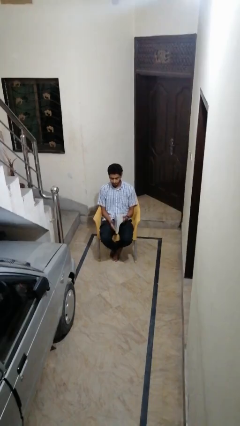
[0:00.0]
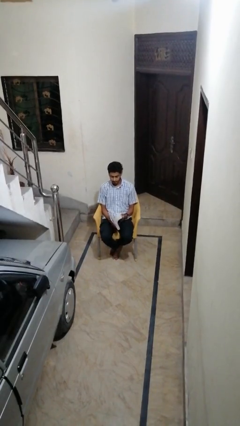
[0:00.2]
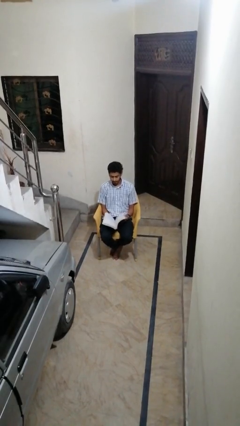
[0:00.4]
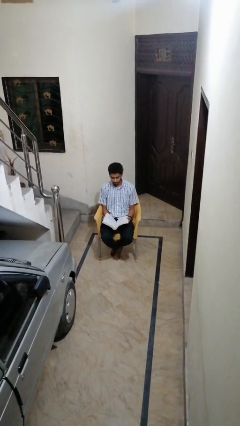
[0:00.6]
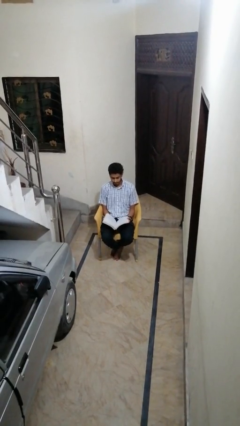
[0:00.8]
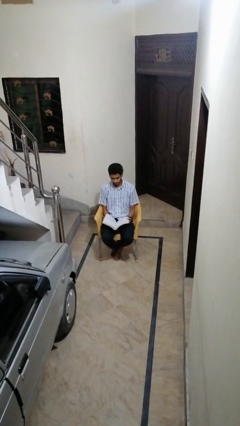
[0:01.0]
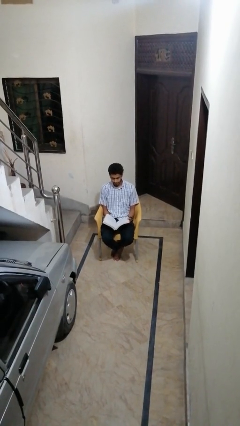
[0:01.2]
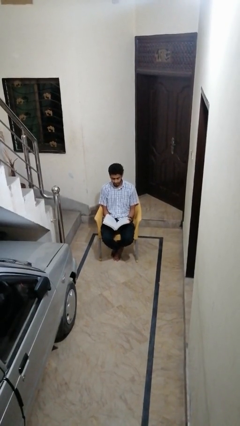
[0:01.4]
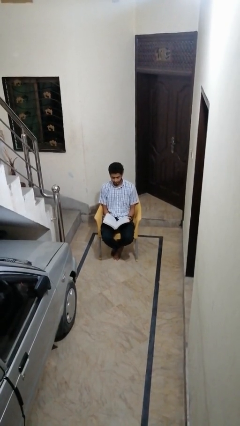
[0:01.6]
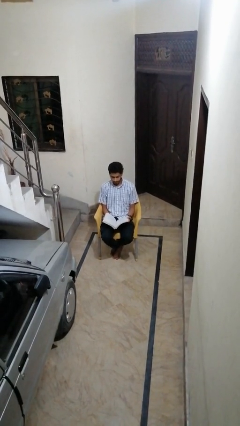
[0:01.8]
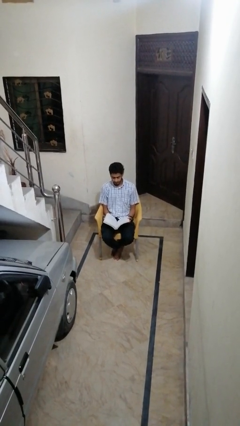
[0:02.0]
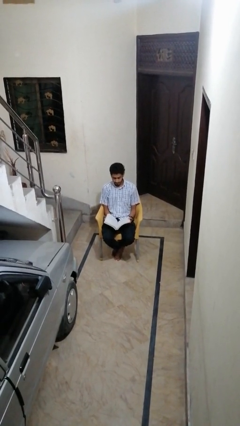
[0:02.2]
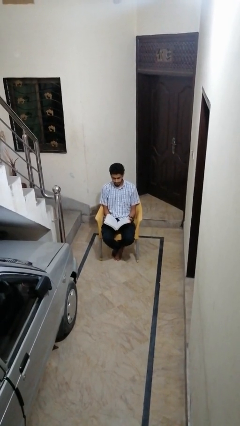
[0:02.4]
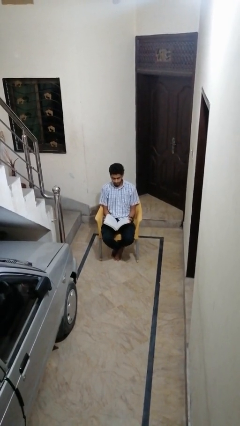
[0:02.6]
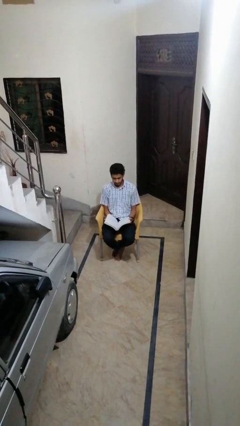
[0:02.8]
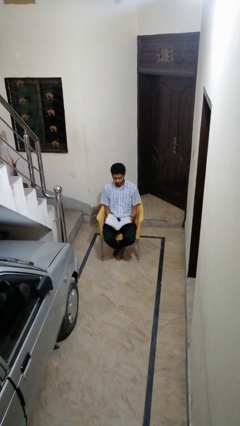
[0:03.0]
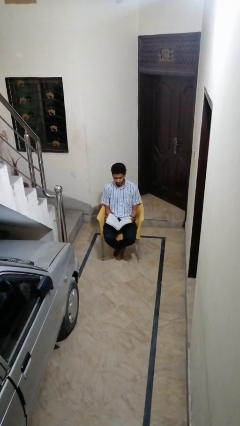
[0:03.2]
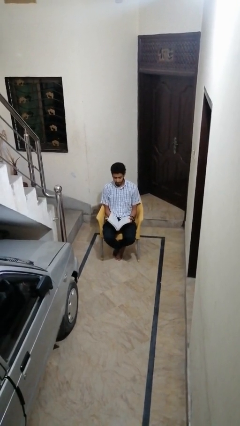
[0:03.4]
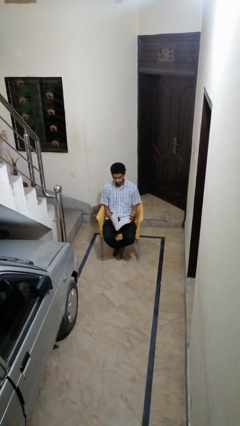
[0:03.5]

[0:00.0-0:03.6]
person reads book

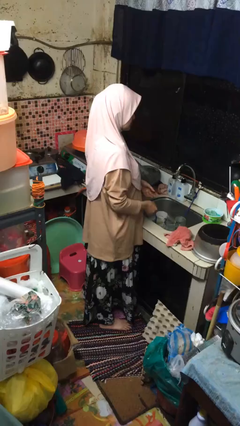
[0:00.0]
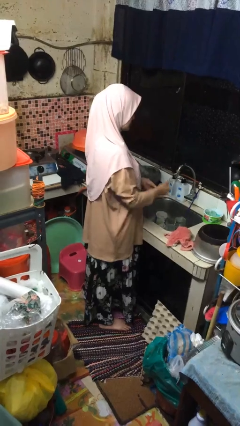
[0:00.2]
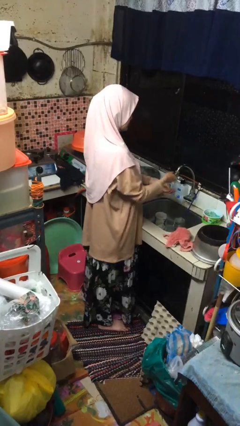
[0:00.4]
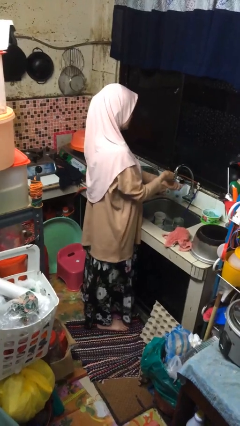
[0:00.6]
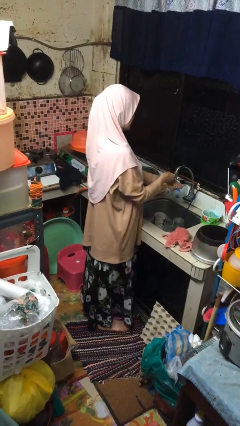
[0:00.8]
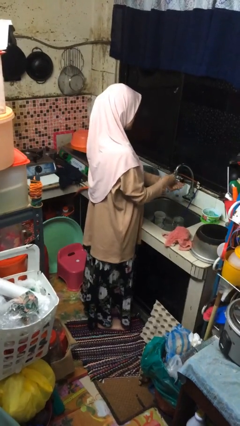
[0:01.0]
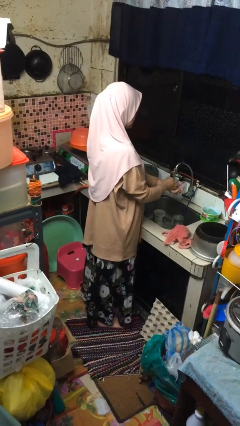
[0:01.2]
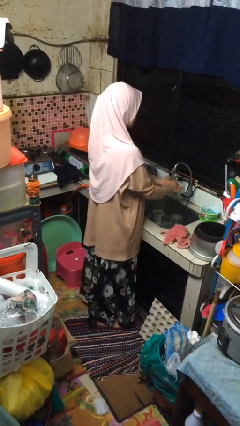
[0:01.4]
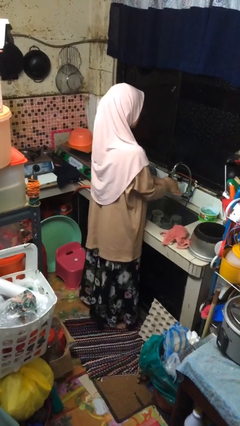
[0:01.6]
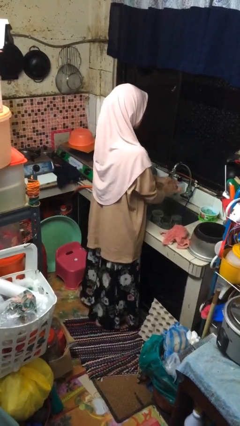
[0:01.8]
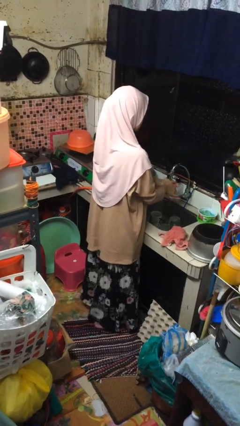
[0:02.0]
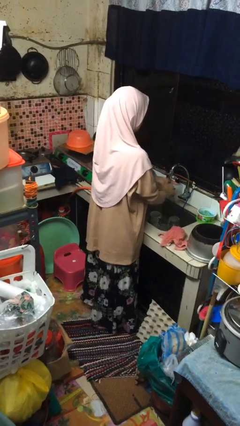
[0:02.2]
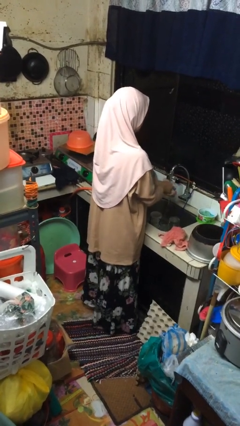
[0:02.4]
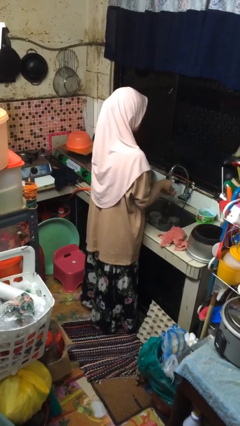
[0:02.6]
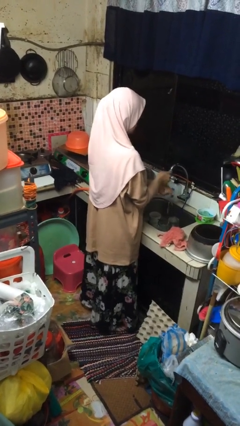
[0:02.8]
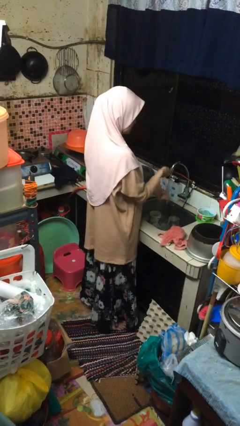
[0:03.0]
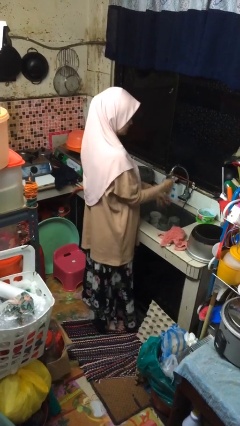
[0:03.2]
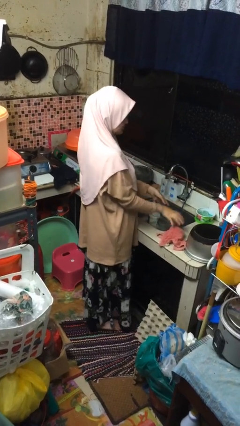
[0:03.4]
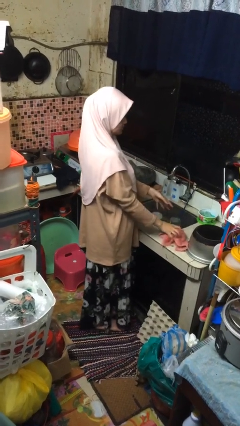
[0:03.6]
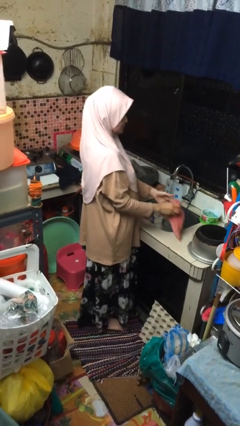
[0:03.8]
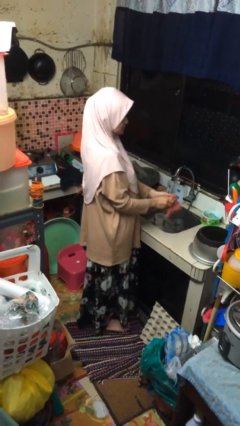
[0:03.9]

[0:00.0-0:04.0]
person washes hands

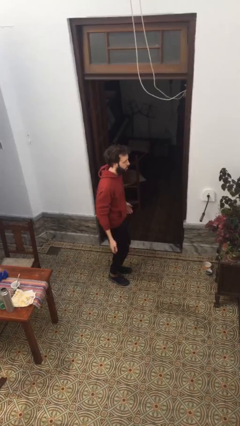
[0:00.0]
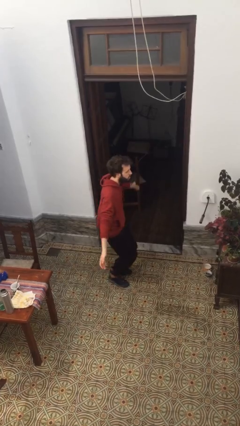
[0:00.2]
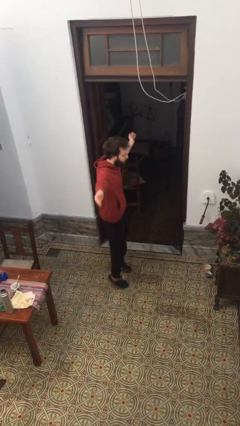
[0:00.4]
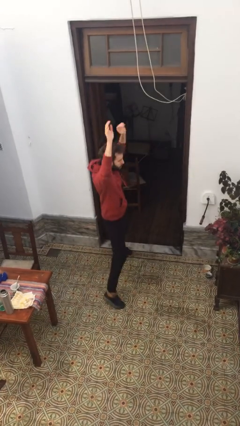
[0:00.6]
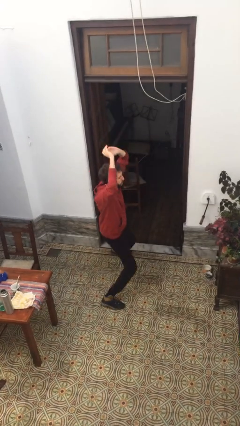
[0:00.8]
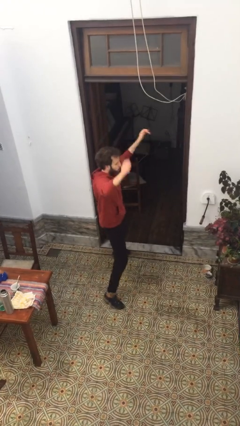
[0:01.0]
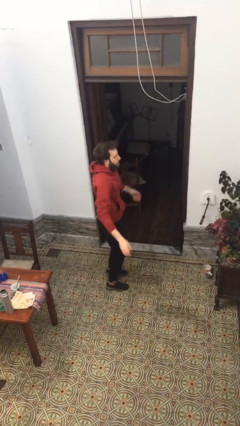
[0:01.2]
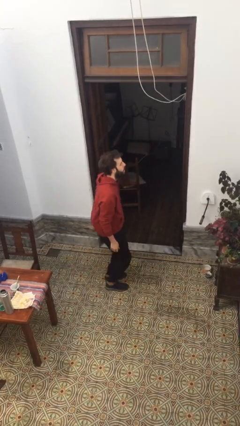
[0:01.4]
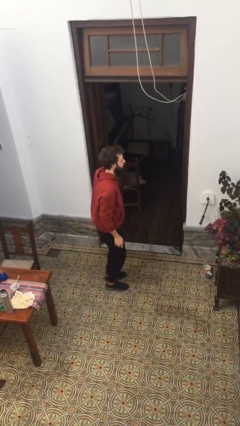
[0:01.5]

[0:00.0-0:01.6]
person exercises with jumping jacks

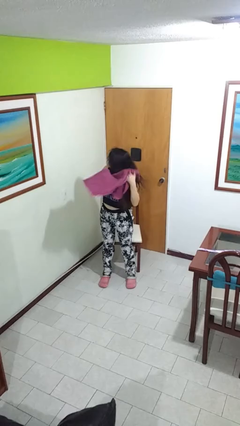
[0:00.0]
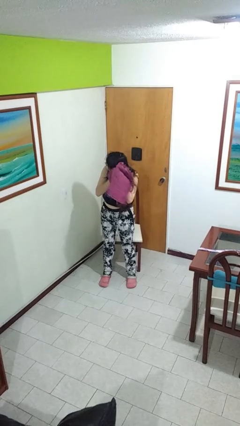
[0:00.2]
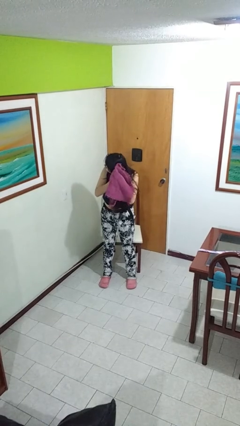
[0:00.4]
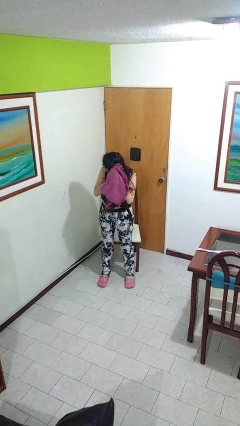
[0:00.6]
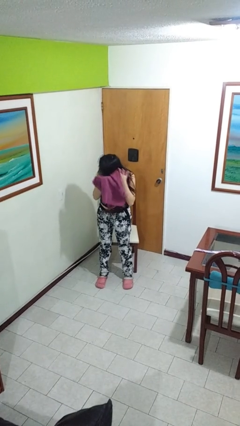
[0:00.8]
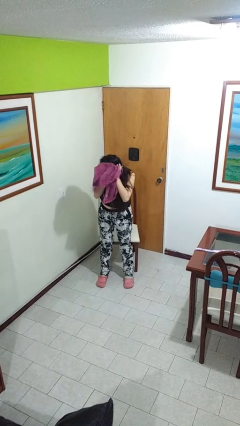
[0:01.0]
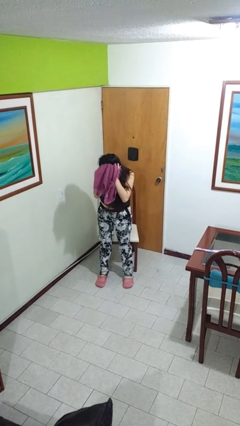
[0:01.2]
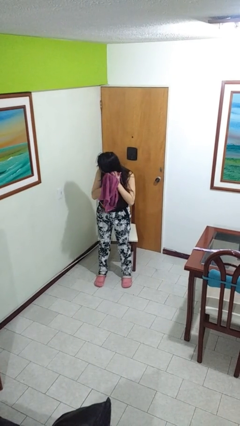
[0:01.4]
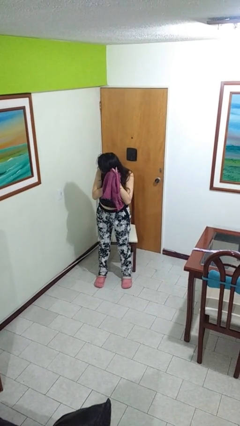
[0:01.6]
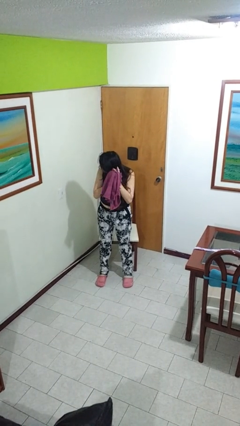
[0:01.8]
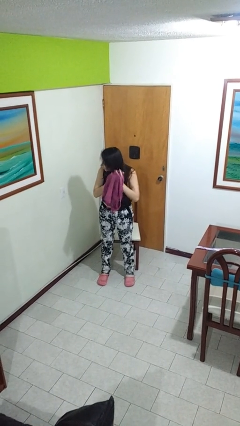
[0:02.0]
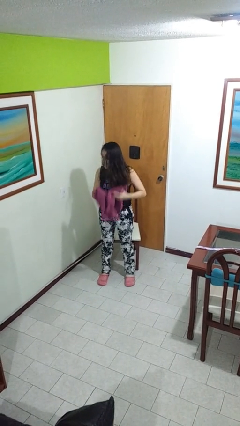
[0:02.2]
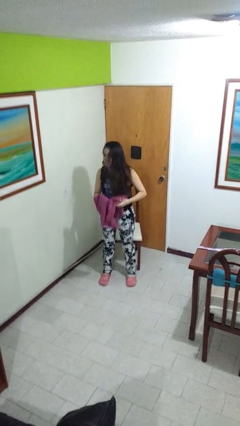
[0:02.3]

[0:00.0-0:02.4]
person dries hair with towel

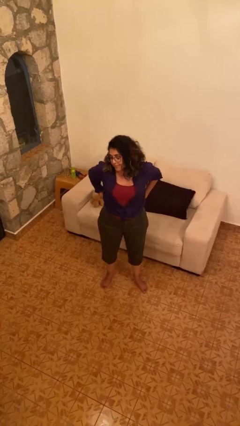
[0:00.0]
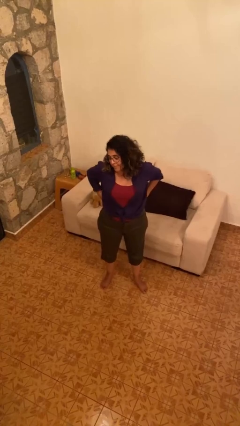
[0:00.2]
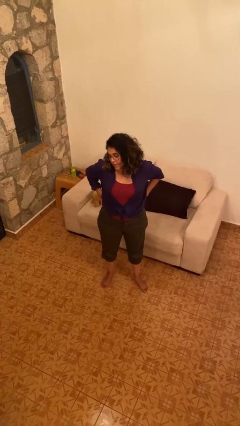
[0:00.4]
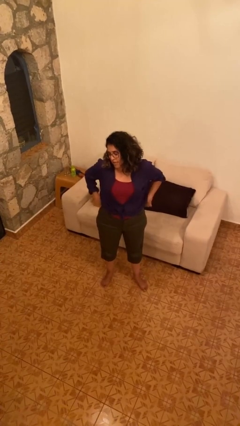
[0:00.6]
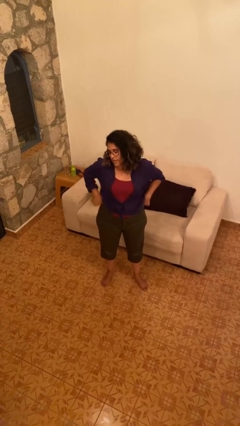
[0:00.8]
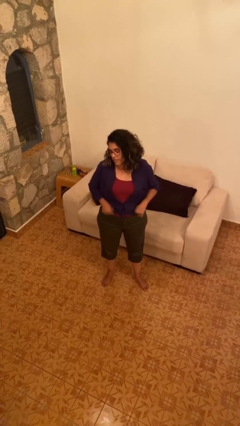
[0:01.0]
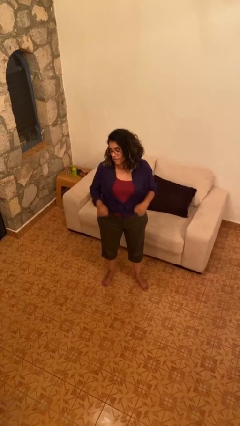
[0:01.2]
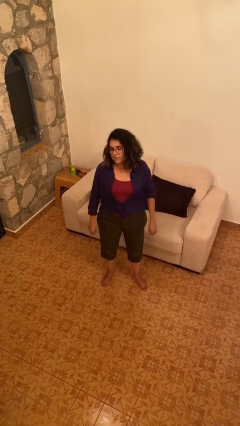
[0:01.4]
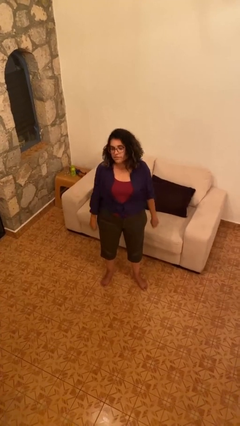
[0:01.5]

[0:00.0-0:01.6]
person hikes up pants

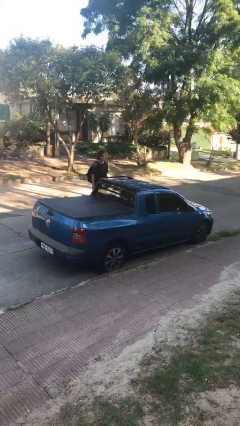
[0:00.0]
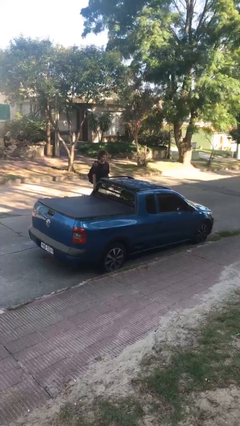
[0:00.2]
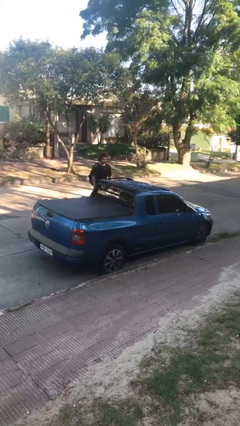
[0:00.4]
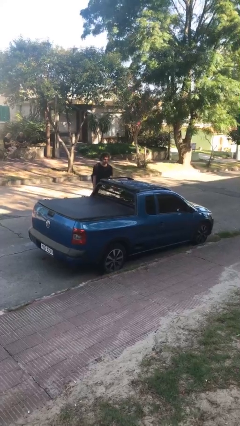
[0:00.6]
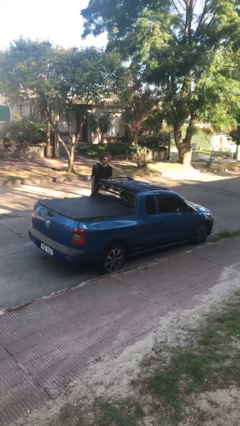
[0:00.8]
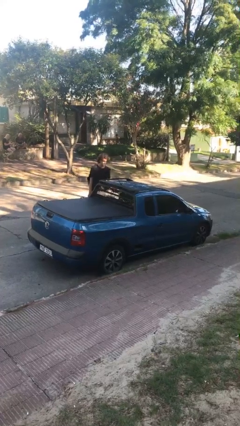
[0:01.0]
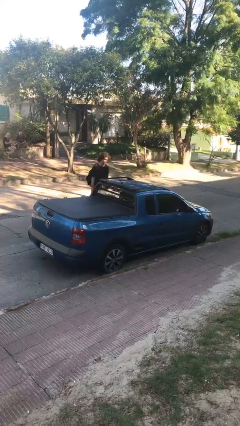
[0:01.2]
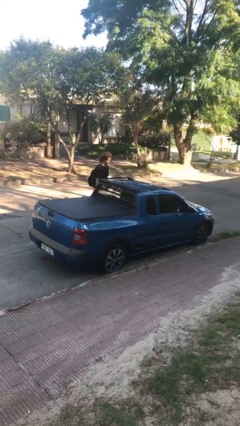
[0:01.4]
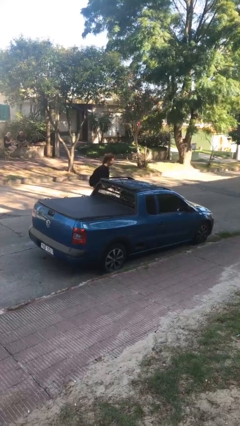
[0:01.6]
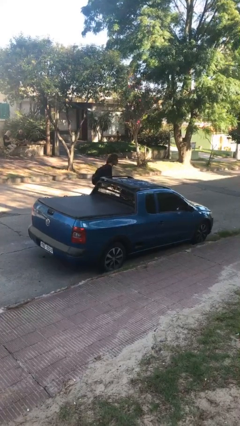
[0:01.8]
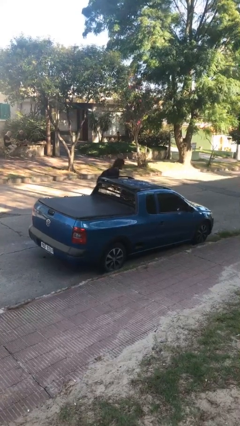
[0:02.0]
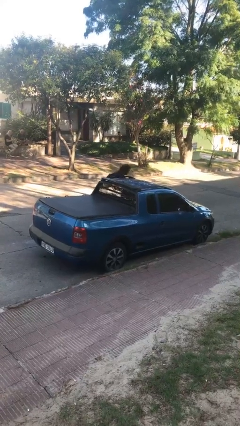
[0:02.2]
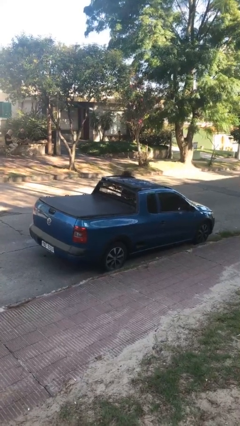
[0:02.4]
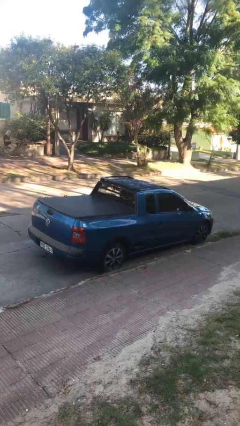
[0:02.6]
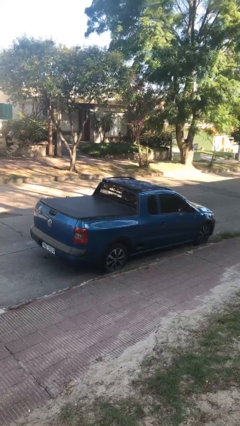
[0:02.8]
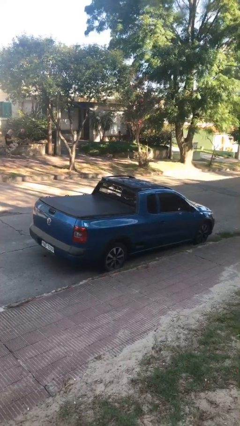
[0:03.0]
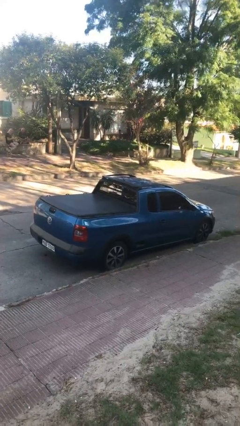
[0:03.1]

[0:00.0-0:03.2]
car picks up person

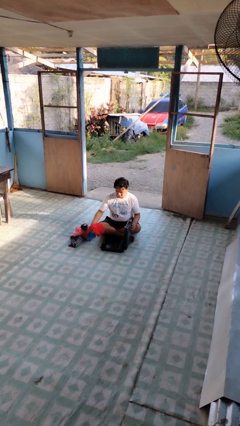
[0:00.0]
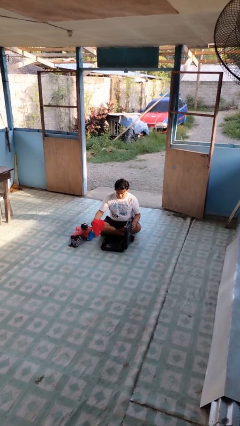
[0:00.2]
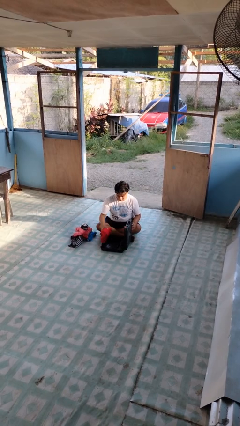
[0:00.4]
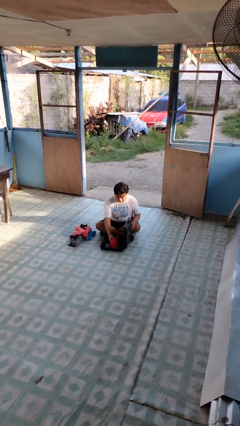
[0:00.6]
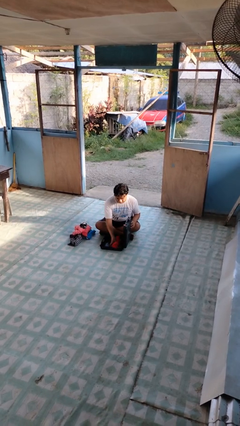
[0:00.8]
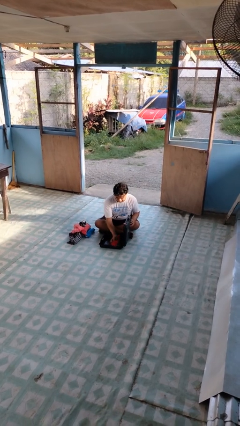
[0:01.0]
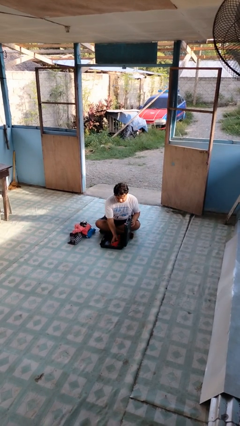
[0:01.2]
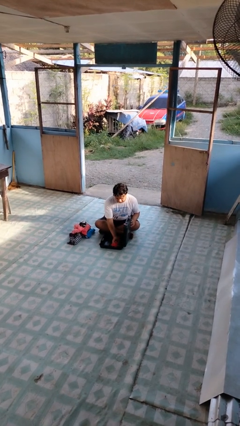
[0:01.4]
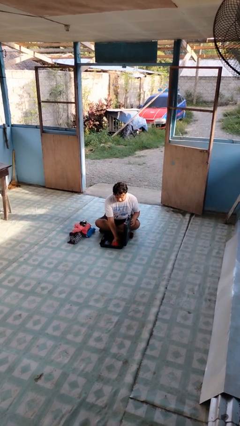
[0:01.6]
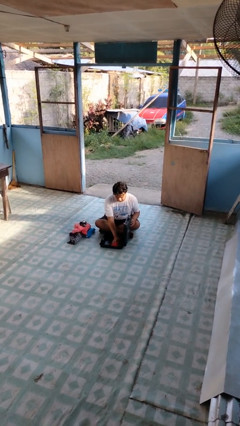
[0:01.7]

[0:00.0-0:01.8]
person loads clothes into suitcase
